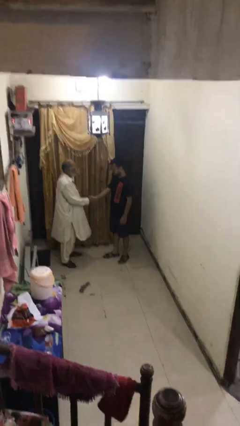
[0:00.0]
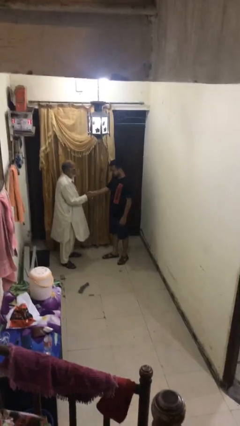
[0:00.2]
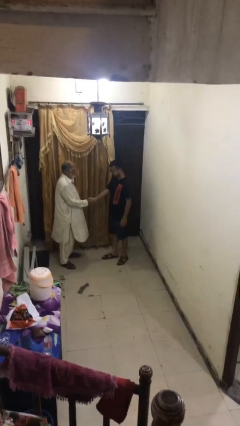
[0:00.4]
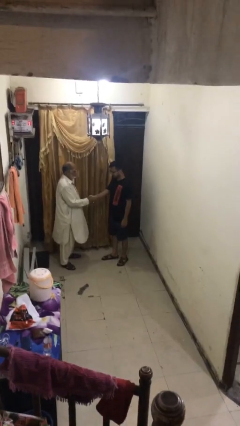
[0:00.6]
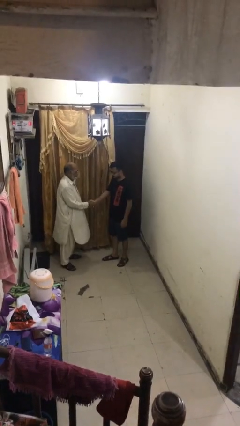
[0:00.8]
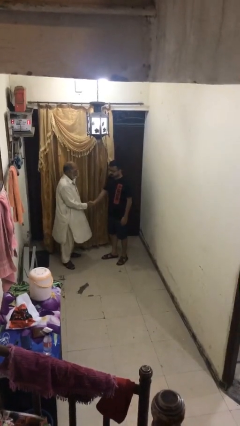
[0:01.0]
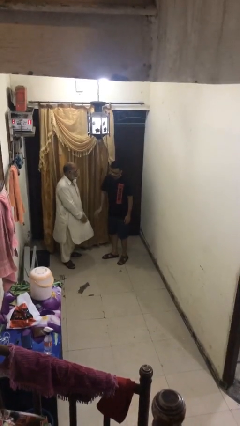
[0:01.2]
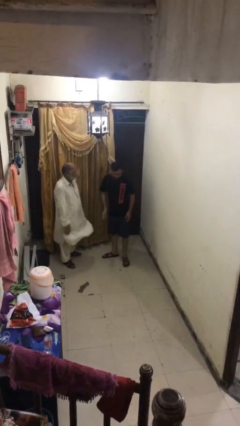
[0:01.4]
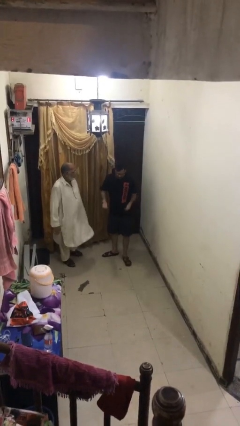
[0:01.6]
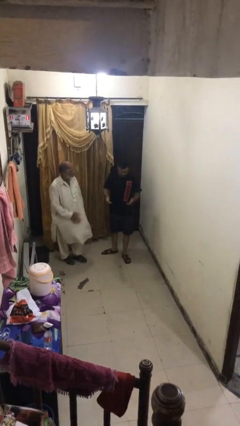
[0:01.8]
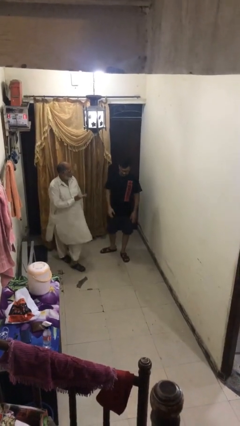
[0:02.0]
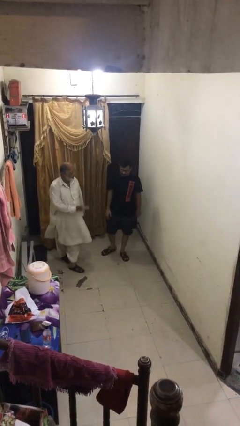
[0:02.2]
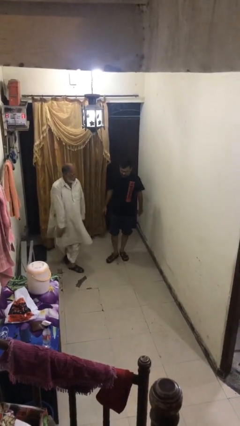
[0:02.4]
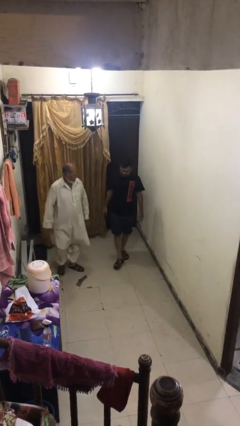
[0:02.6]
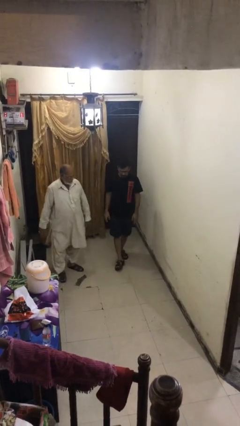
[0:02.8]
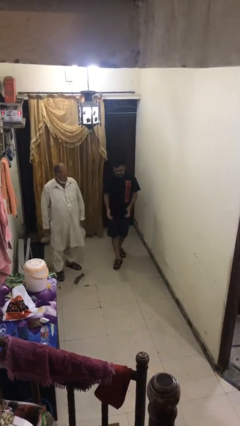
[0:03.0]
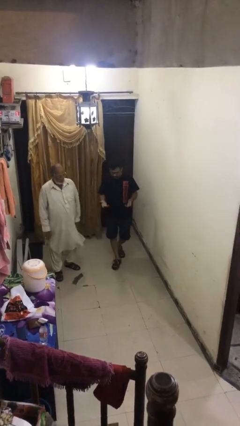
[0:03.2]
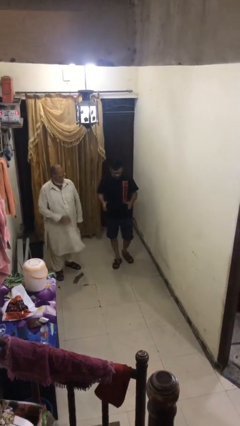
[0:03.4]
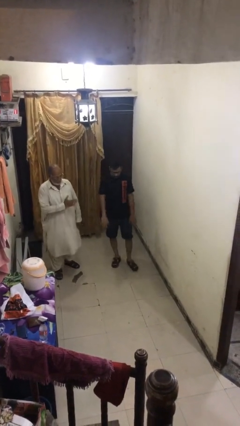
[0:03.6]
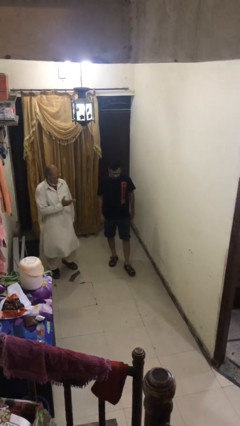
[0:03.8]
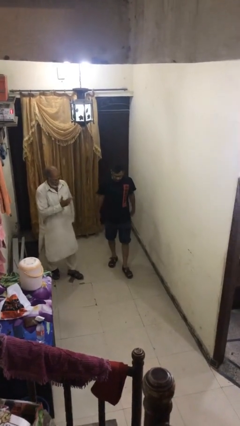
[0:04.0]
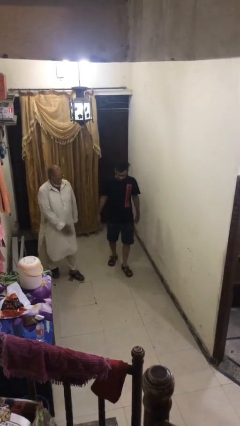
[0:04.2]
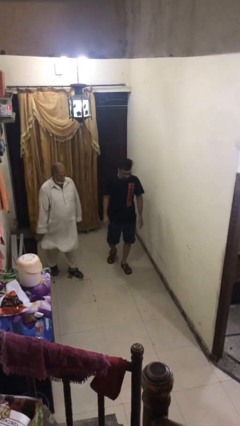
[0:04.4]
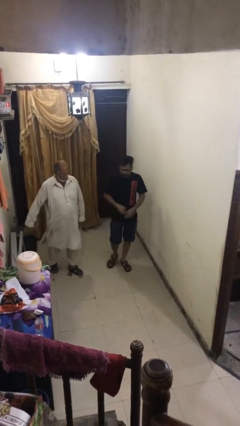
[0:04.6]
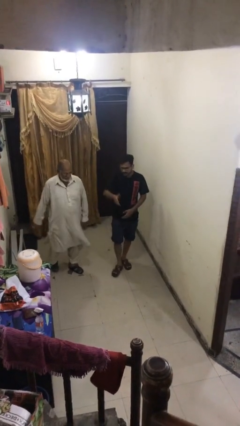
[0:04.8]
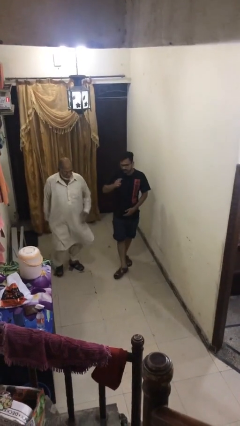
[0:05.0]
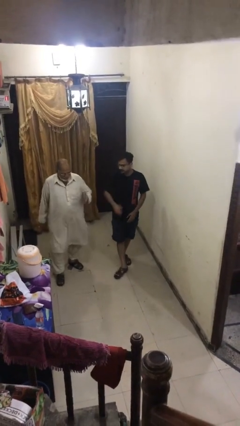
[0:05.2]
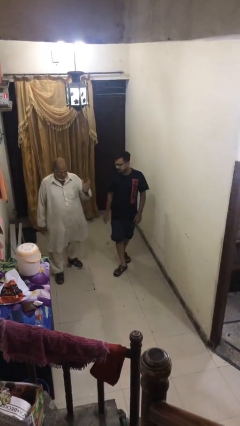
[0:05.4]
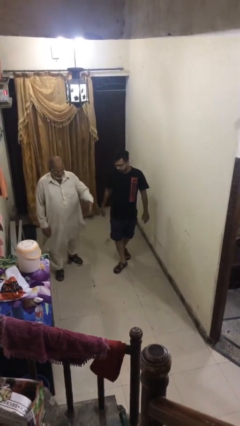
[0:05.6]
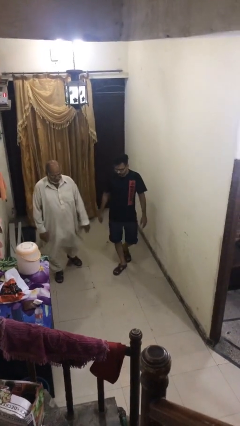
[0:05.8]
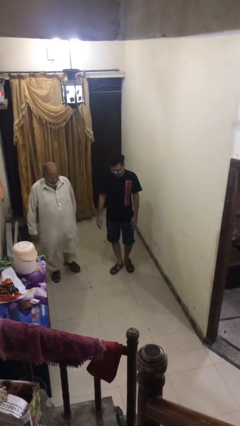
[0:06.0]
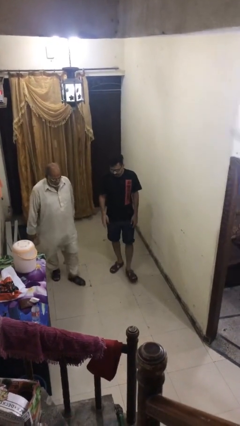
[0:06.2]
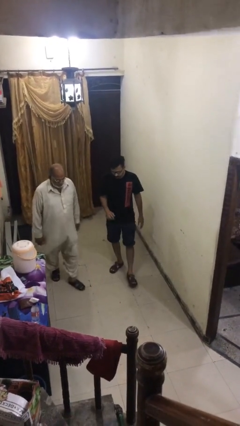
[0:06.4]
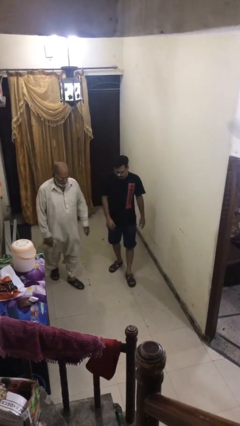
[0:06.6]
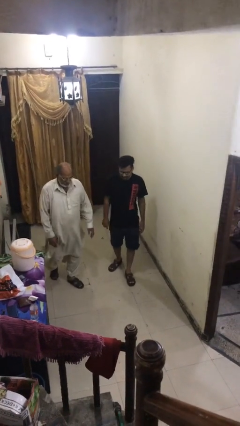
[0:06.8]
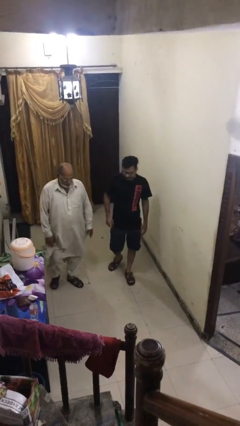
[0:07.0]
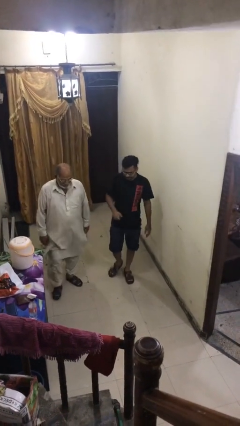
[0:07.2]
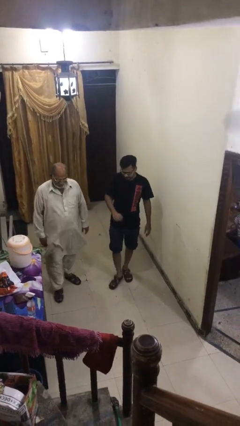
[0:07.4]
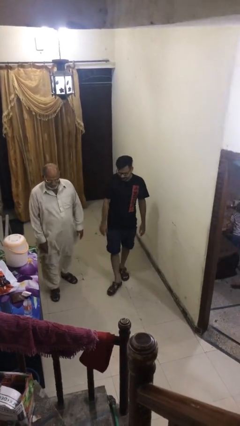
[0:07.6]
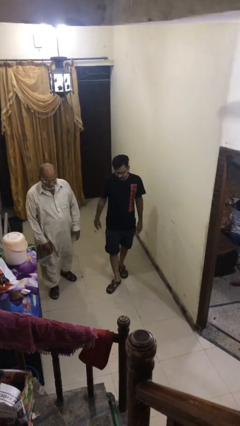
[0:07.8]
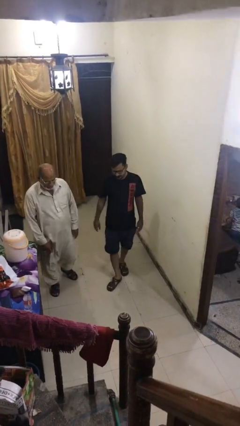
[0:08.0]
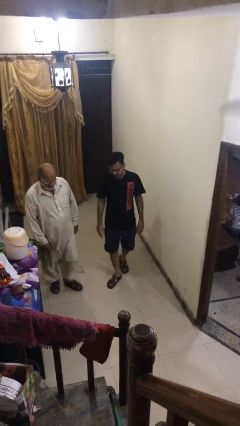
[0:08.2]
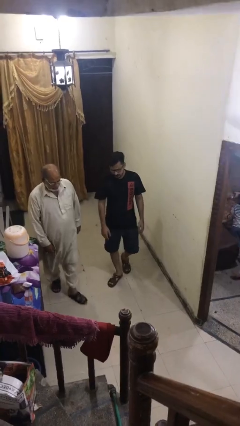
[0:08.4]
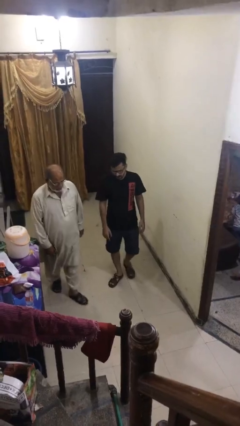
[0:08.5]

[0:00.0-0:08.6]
person talks to person

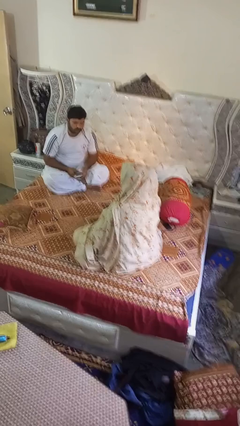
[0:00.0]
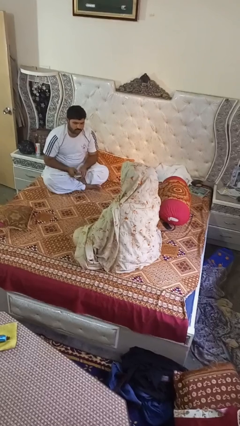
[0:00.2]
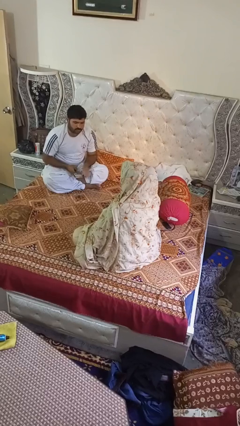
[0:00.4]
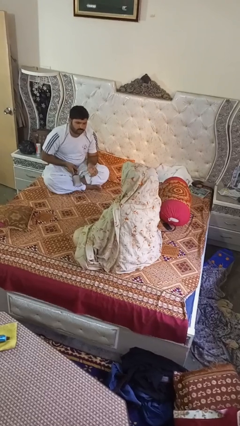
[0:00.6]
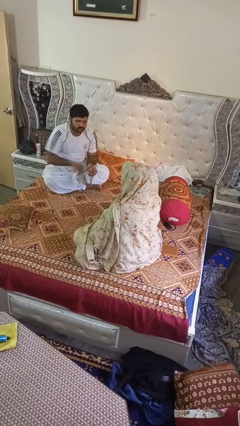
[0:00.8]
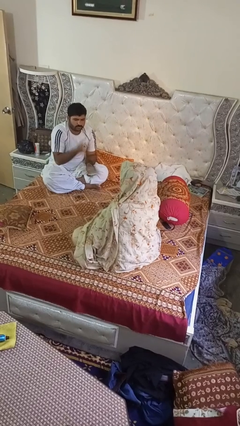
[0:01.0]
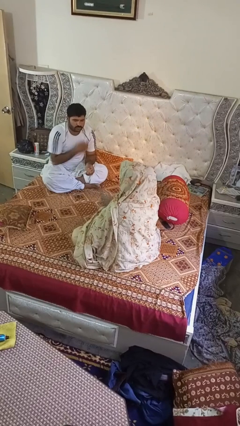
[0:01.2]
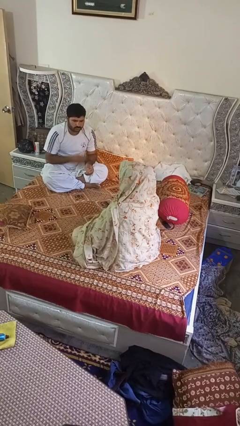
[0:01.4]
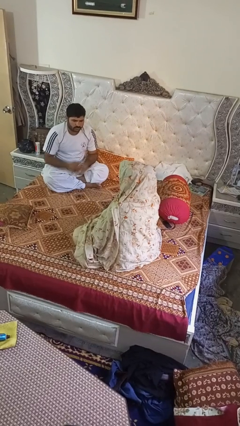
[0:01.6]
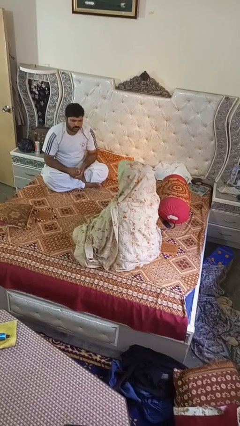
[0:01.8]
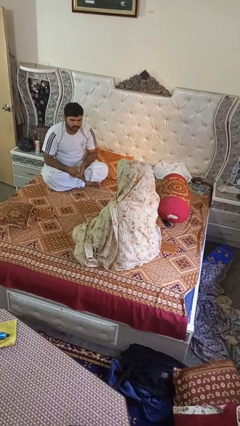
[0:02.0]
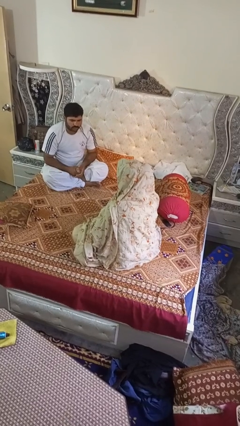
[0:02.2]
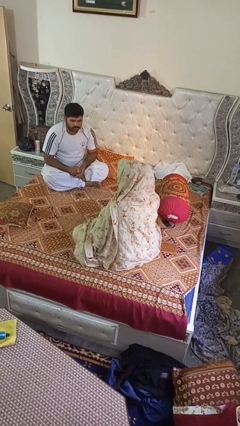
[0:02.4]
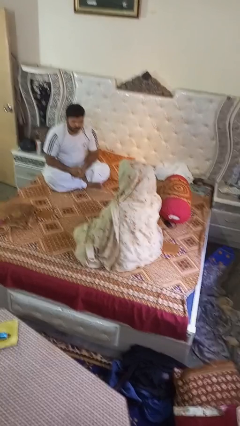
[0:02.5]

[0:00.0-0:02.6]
person catches object from person

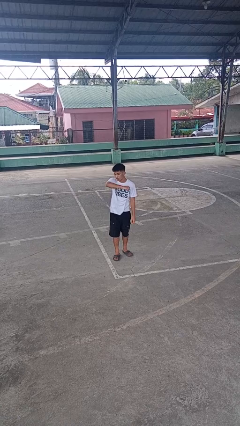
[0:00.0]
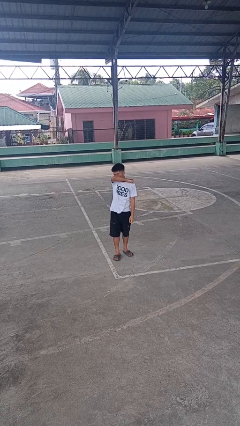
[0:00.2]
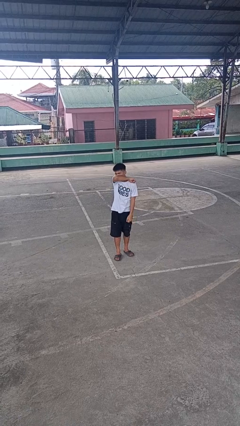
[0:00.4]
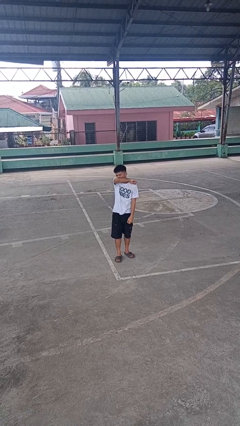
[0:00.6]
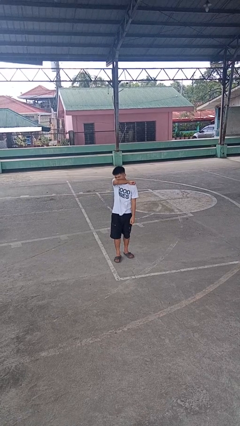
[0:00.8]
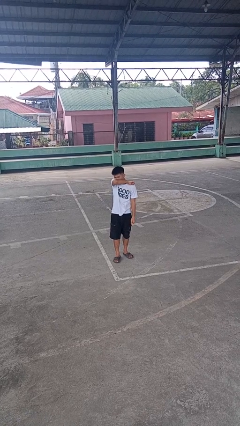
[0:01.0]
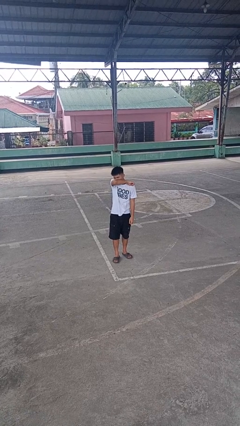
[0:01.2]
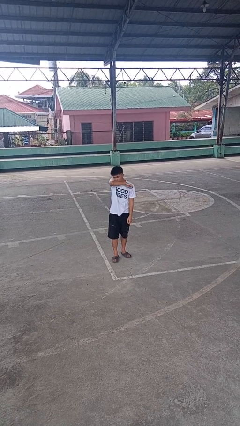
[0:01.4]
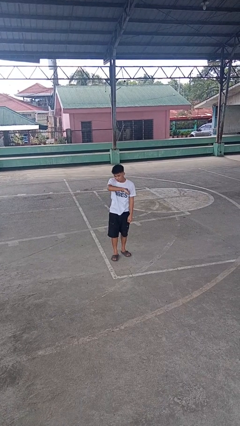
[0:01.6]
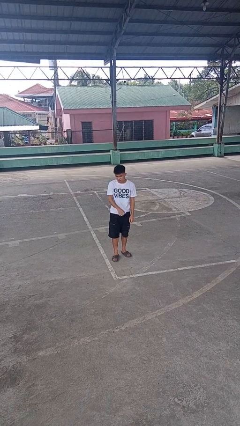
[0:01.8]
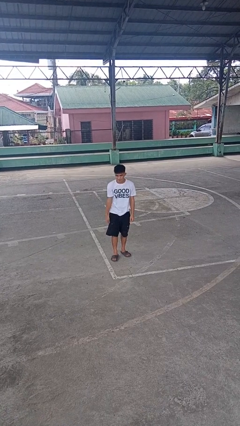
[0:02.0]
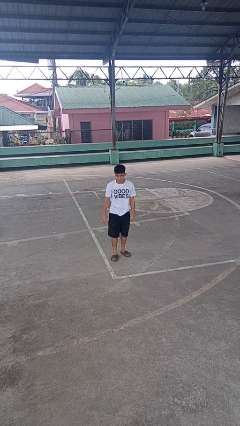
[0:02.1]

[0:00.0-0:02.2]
person sneezes into arm

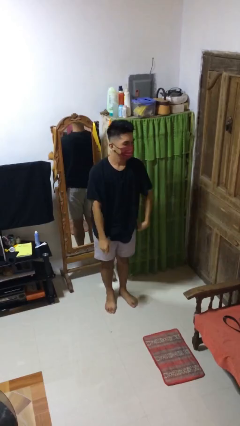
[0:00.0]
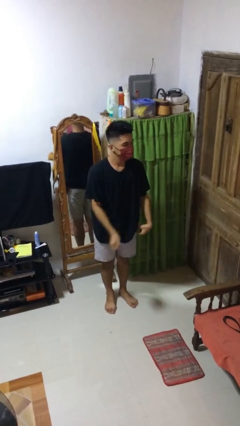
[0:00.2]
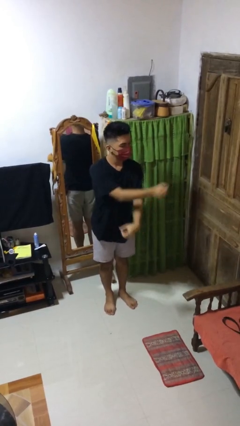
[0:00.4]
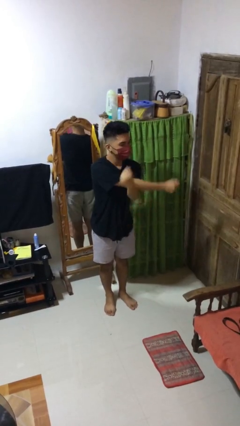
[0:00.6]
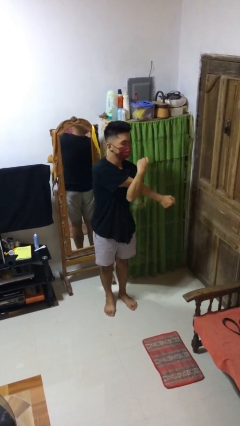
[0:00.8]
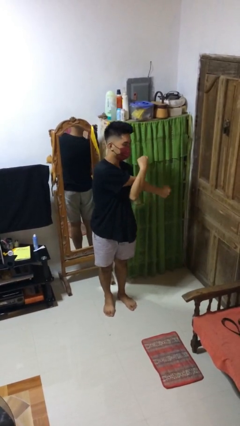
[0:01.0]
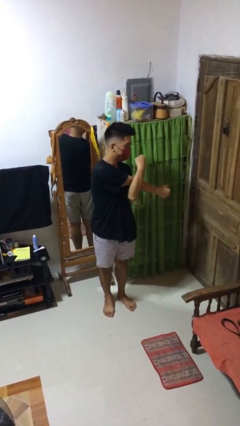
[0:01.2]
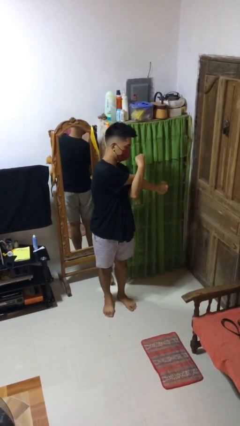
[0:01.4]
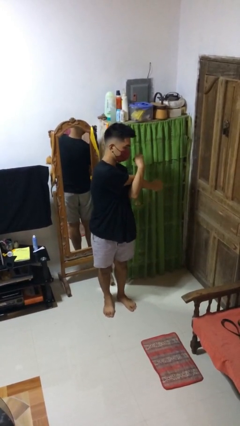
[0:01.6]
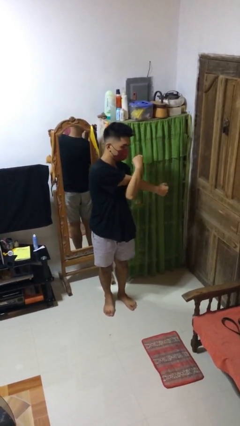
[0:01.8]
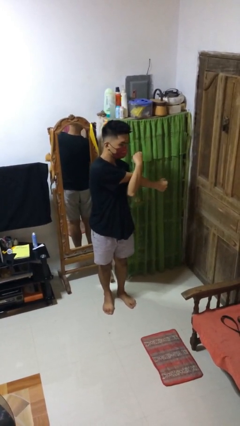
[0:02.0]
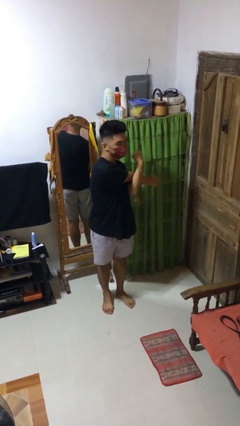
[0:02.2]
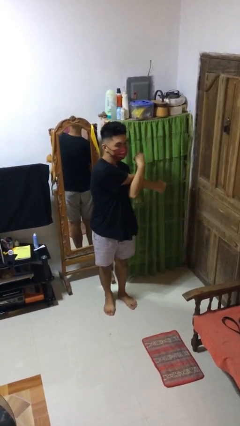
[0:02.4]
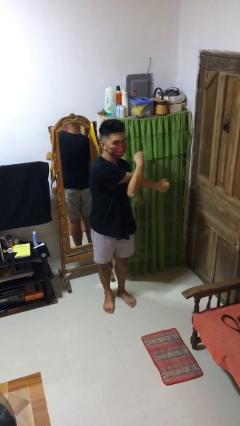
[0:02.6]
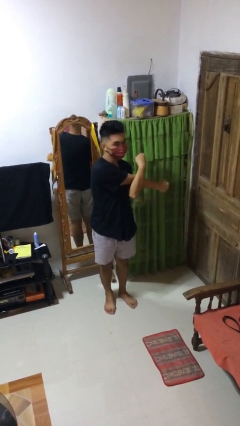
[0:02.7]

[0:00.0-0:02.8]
person stretches arms to side

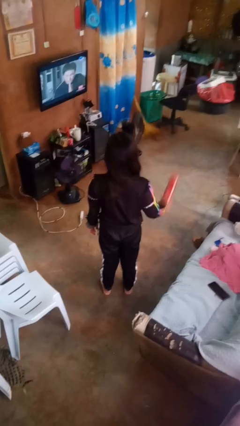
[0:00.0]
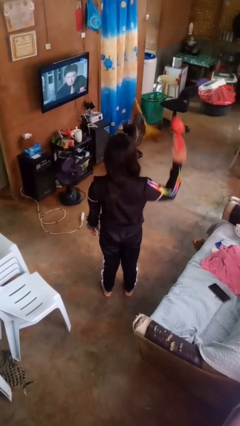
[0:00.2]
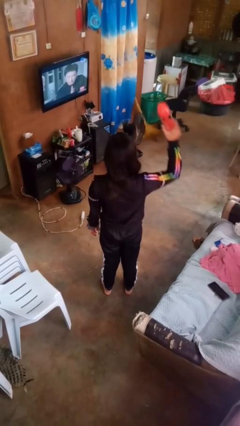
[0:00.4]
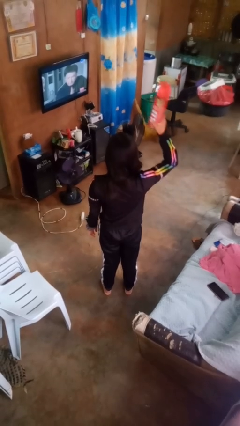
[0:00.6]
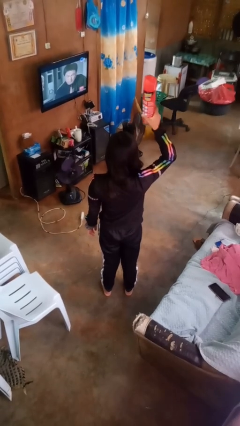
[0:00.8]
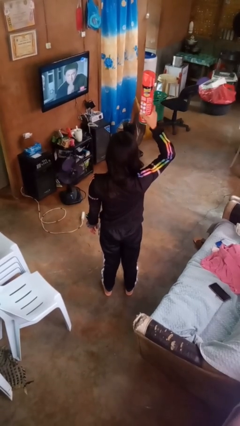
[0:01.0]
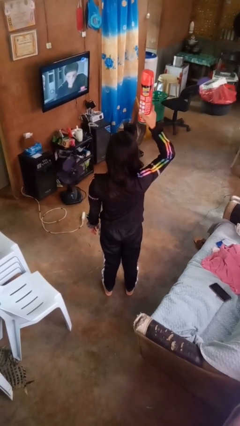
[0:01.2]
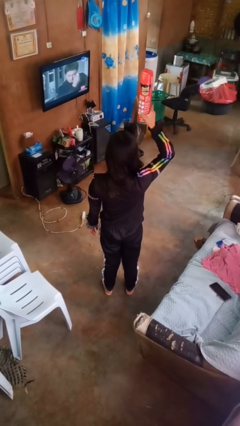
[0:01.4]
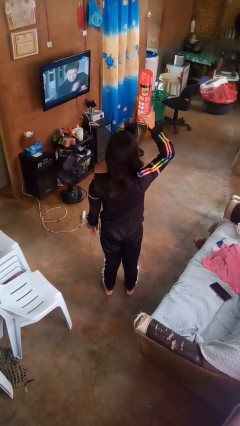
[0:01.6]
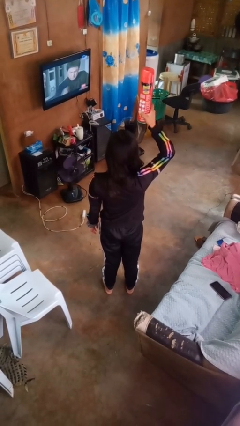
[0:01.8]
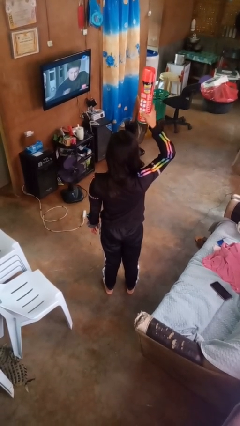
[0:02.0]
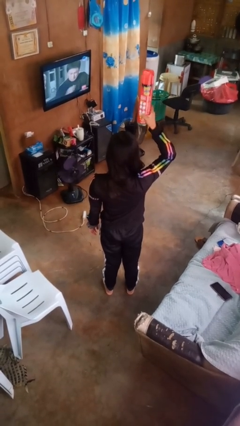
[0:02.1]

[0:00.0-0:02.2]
person holds object above head
